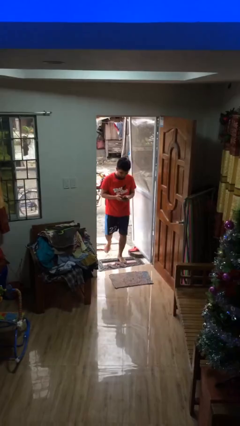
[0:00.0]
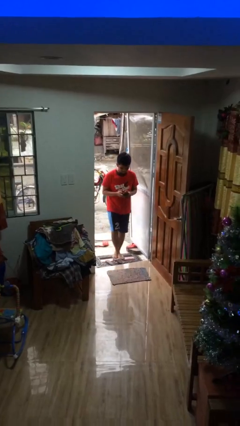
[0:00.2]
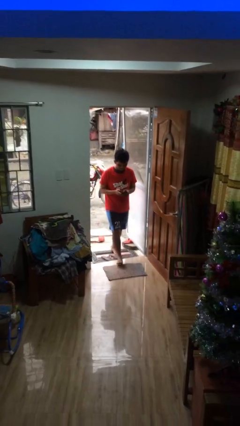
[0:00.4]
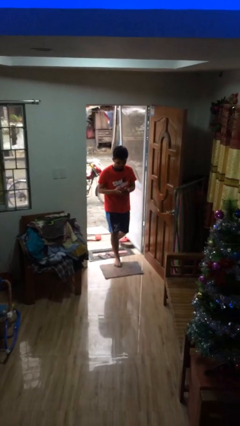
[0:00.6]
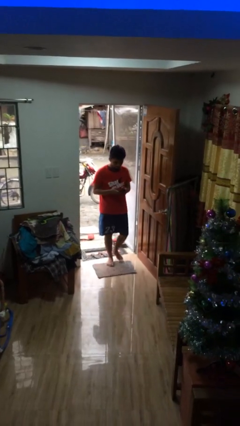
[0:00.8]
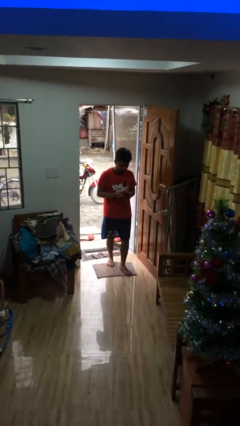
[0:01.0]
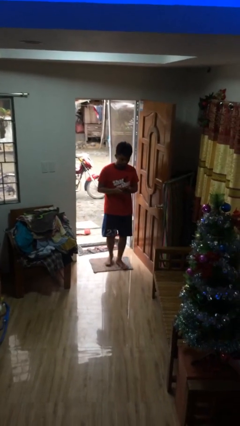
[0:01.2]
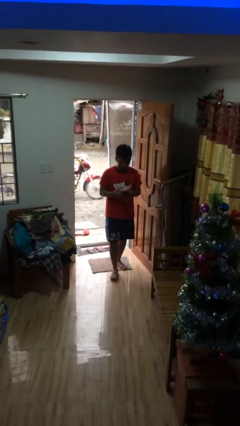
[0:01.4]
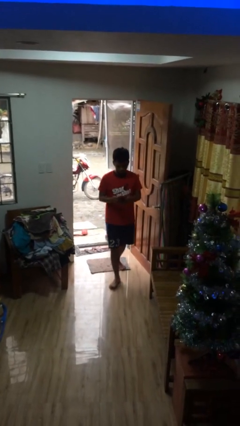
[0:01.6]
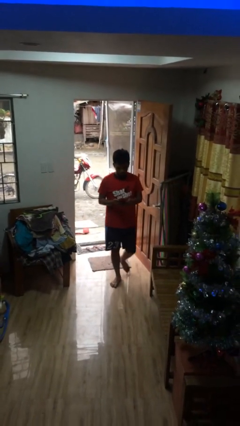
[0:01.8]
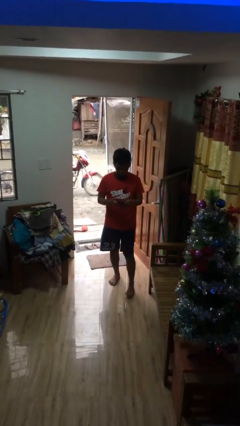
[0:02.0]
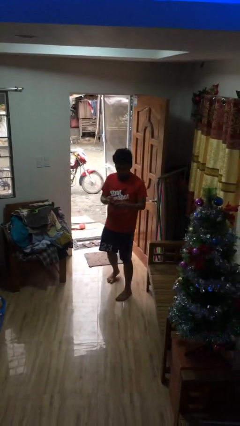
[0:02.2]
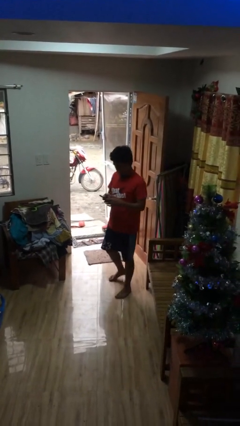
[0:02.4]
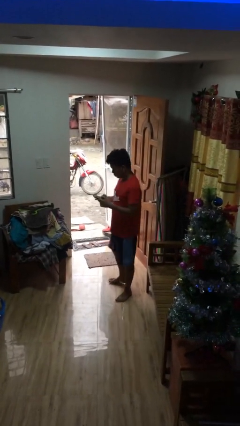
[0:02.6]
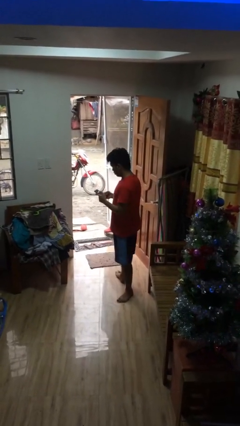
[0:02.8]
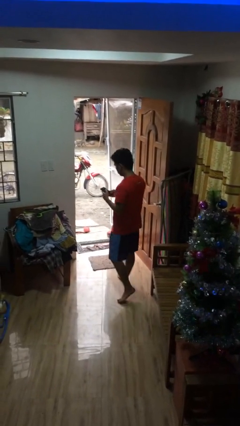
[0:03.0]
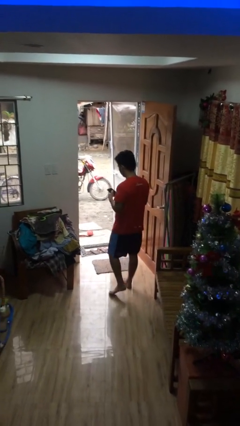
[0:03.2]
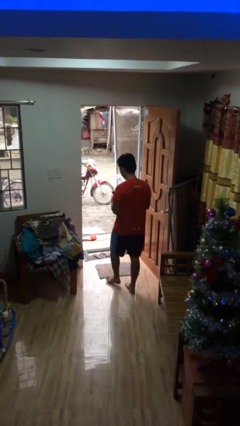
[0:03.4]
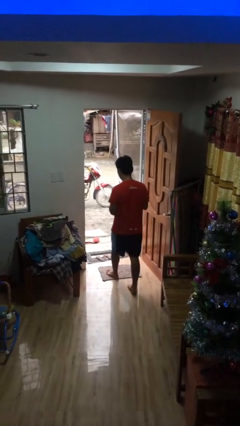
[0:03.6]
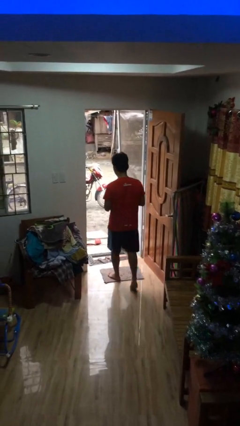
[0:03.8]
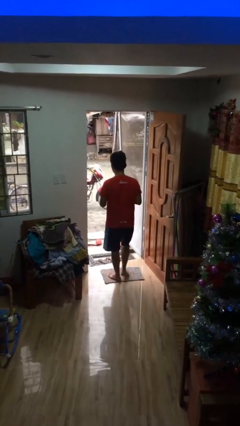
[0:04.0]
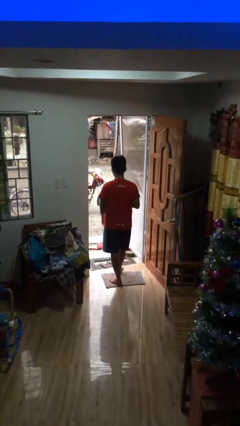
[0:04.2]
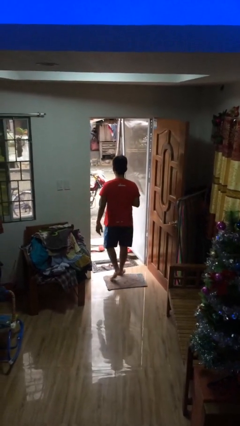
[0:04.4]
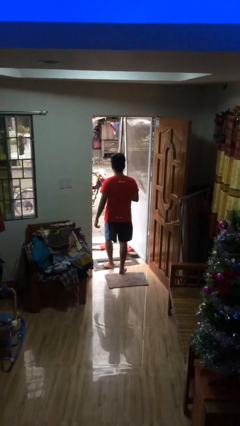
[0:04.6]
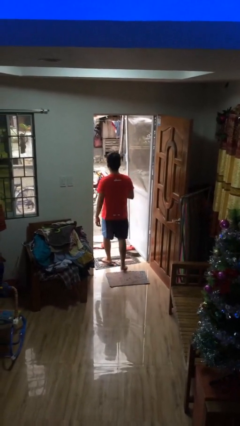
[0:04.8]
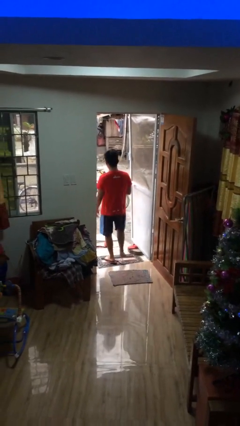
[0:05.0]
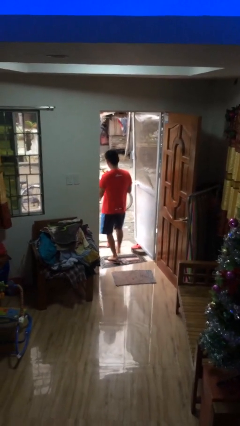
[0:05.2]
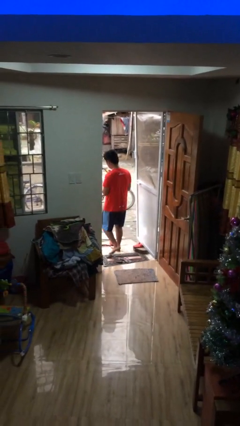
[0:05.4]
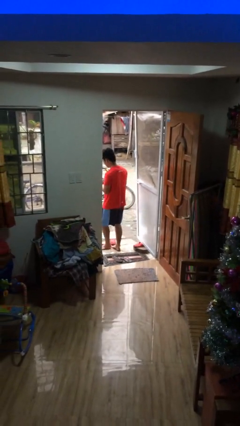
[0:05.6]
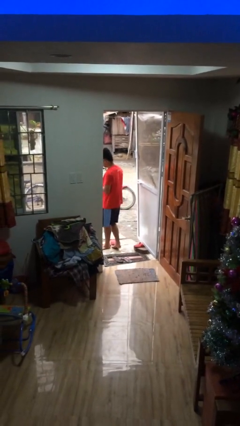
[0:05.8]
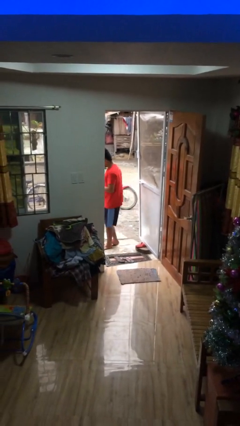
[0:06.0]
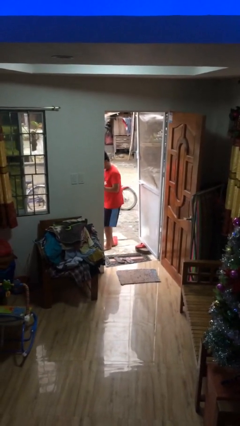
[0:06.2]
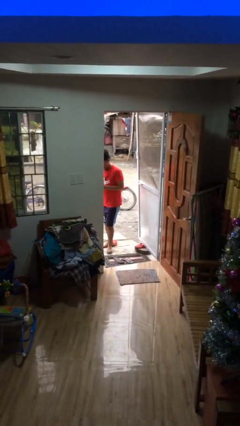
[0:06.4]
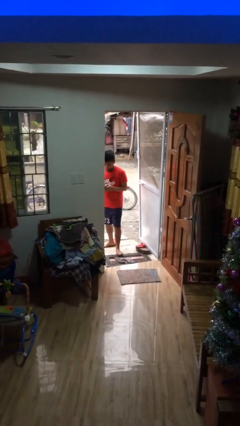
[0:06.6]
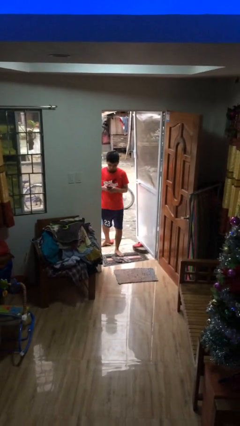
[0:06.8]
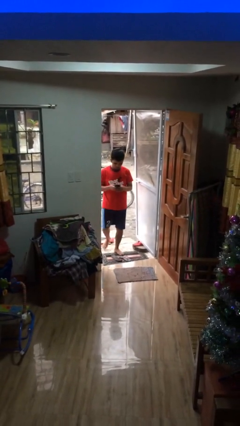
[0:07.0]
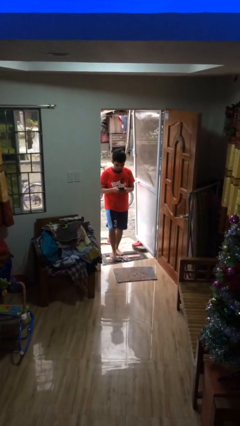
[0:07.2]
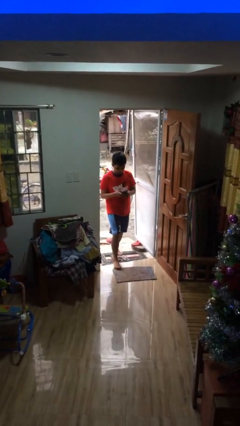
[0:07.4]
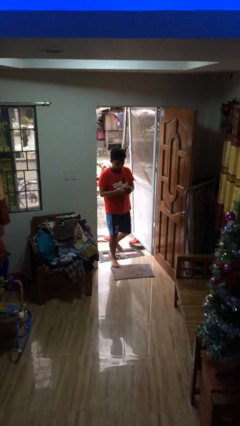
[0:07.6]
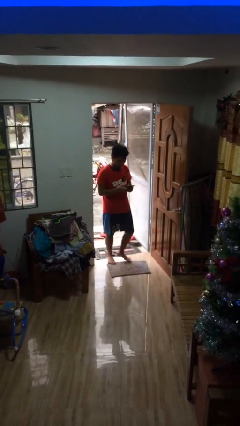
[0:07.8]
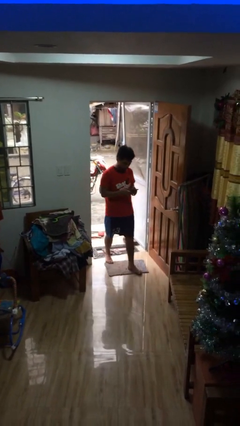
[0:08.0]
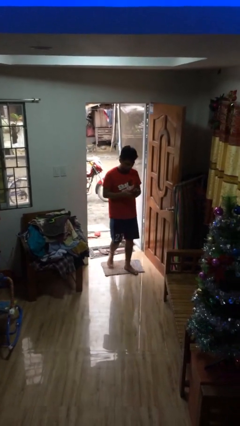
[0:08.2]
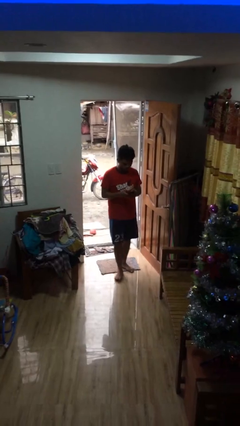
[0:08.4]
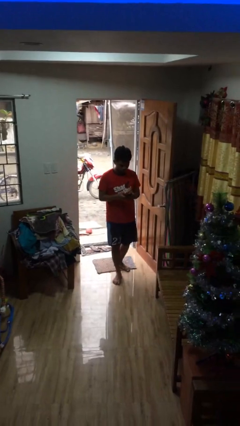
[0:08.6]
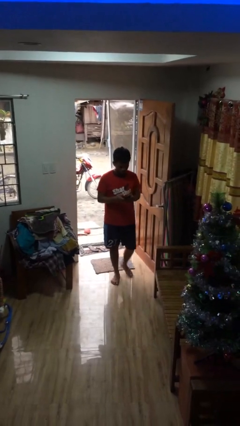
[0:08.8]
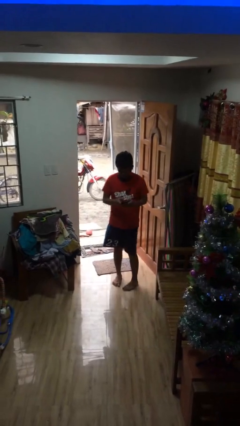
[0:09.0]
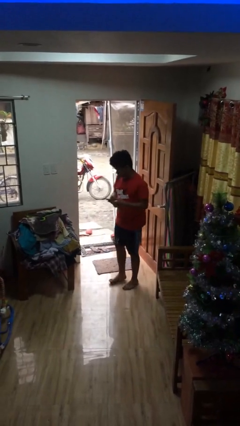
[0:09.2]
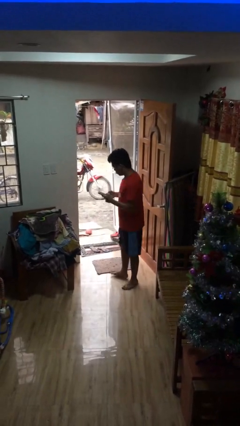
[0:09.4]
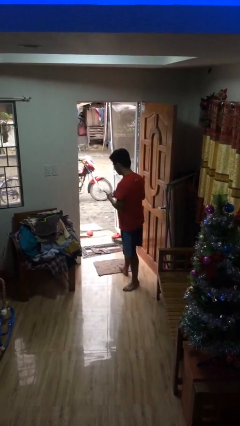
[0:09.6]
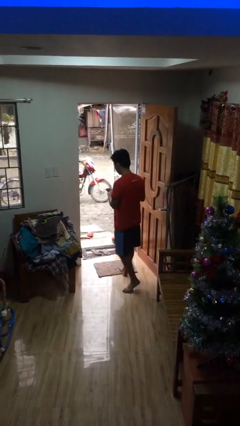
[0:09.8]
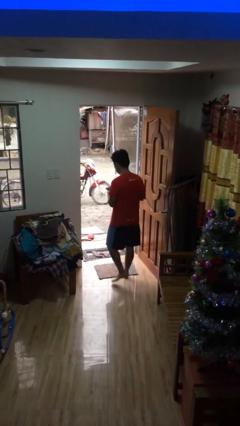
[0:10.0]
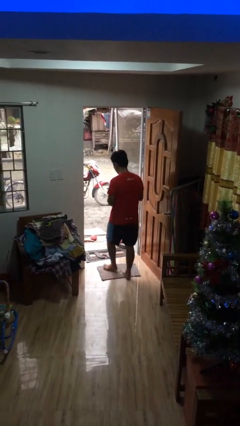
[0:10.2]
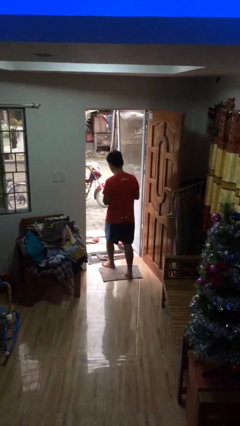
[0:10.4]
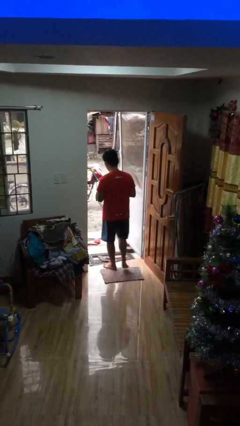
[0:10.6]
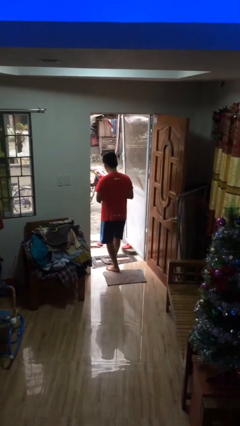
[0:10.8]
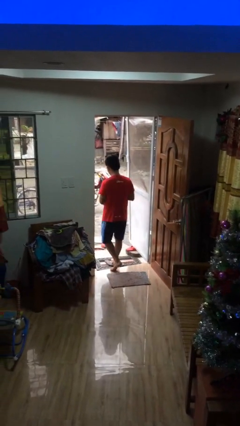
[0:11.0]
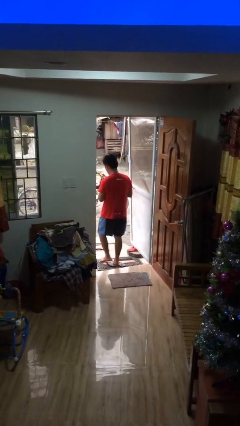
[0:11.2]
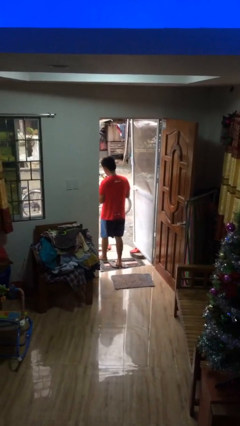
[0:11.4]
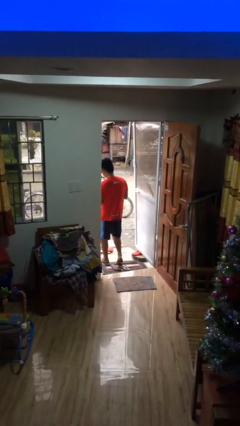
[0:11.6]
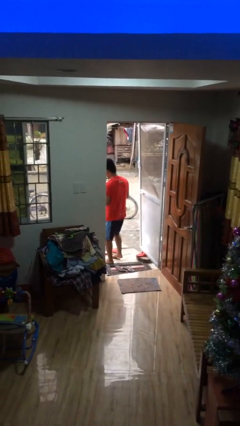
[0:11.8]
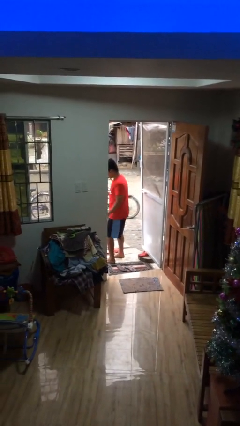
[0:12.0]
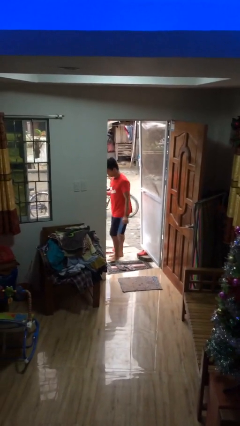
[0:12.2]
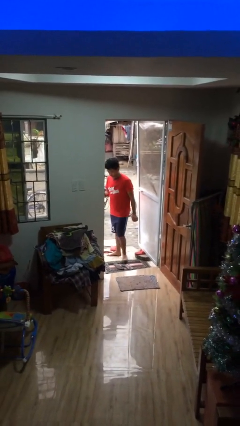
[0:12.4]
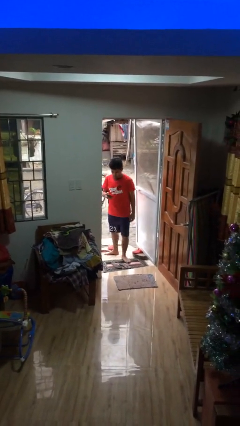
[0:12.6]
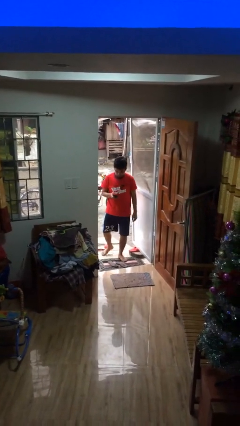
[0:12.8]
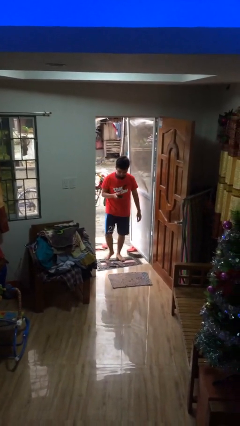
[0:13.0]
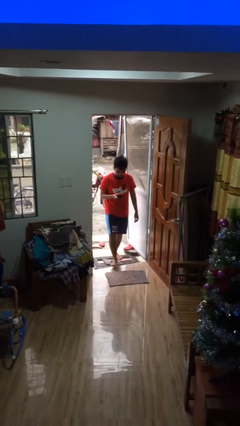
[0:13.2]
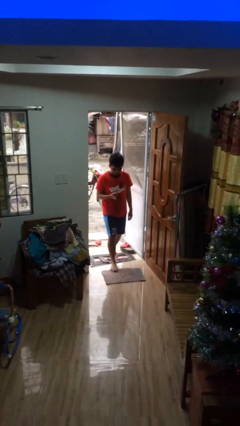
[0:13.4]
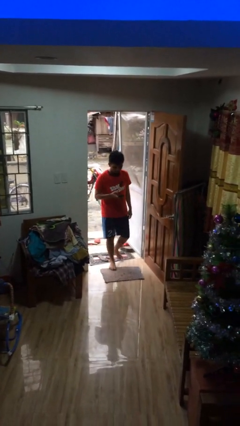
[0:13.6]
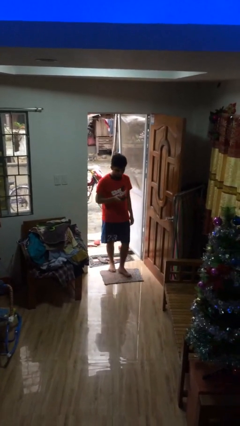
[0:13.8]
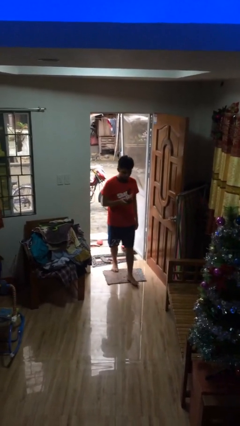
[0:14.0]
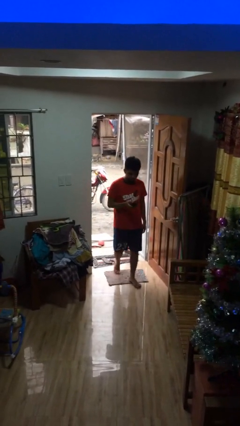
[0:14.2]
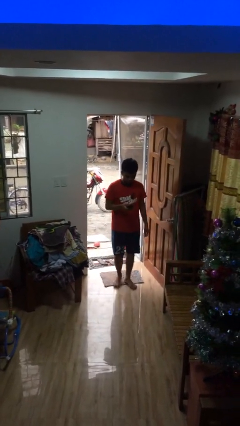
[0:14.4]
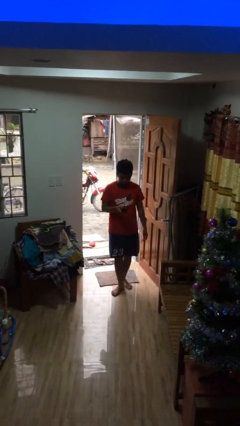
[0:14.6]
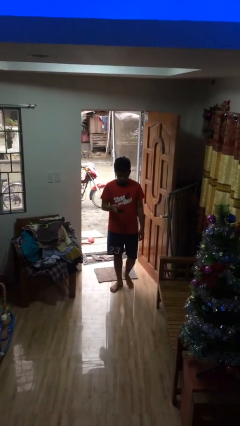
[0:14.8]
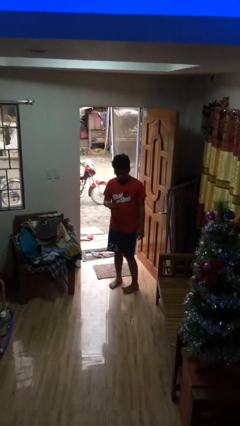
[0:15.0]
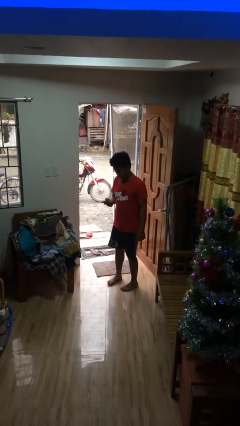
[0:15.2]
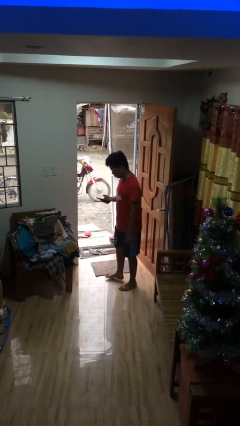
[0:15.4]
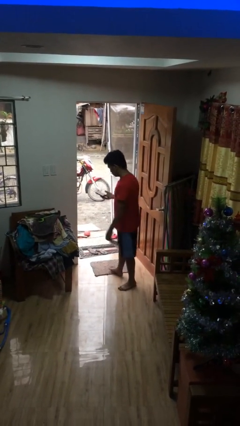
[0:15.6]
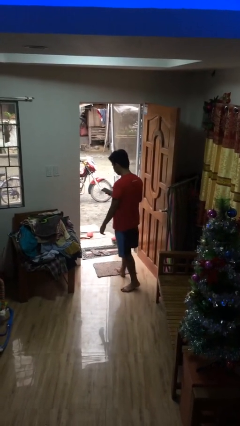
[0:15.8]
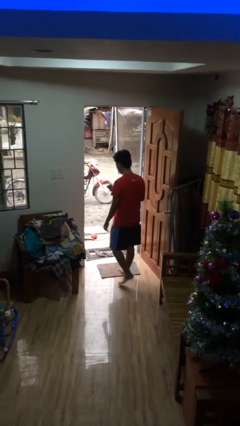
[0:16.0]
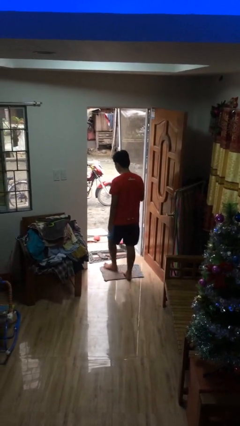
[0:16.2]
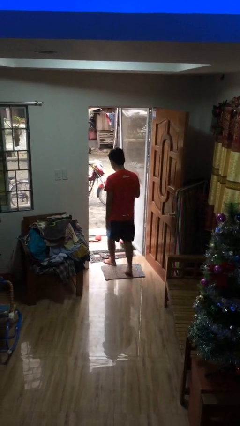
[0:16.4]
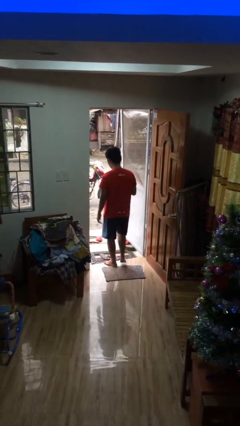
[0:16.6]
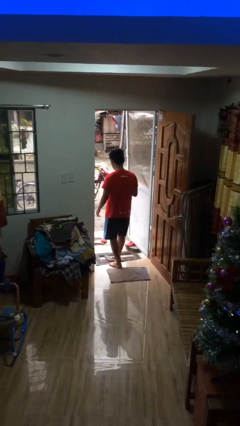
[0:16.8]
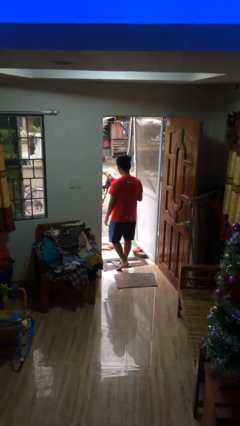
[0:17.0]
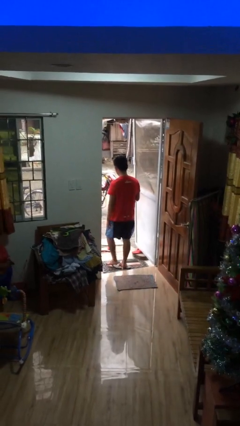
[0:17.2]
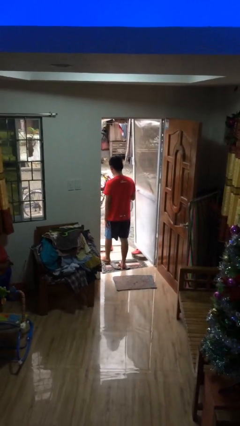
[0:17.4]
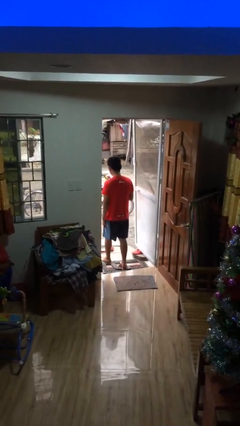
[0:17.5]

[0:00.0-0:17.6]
person texts on phone

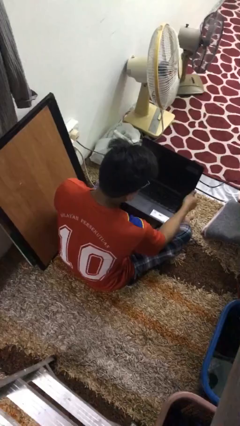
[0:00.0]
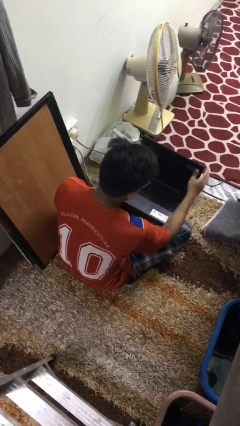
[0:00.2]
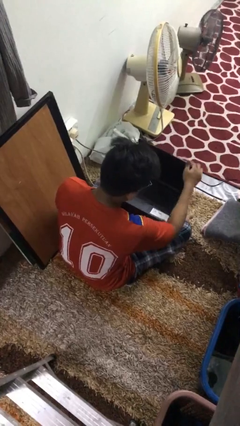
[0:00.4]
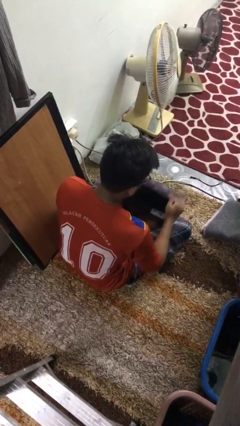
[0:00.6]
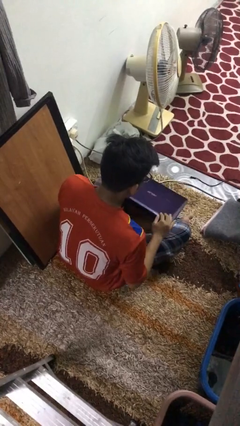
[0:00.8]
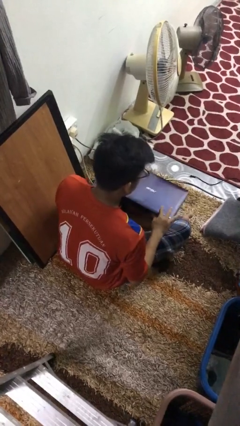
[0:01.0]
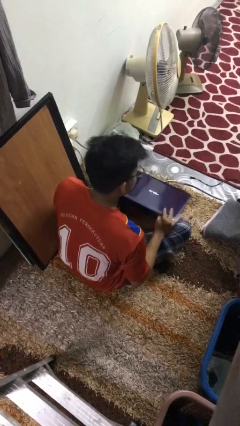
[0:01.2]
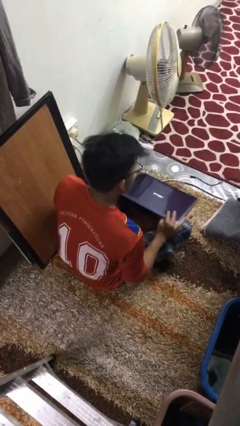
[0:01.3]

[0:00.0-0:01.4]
person closes laptop
